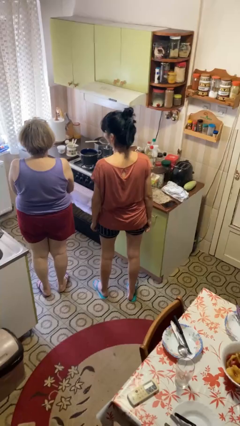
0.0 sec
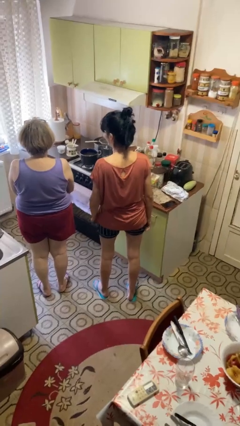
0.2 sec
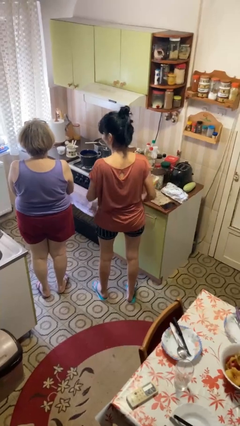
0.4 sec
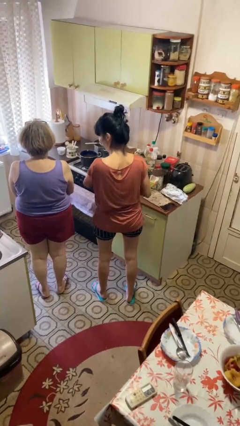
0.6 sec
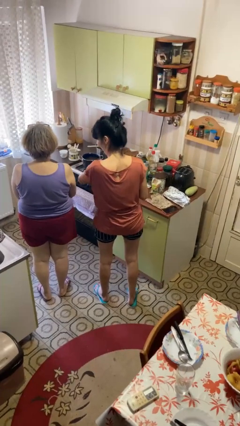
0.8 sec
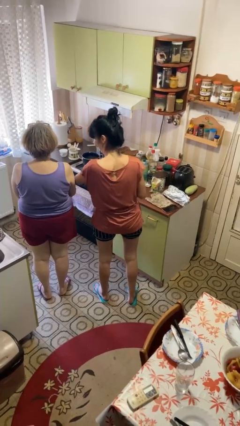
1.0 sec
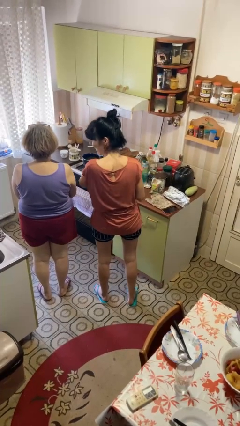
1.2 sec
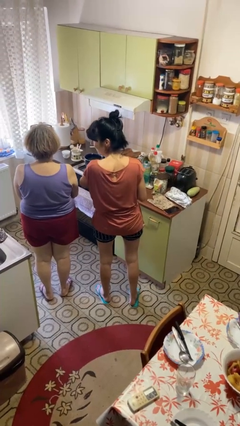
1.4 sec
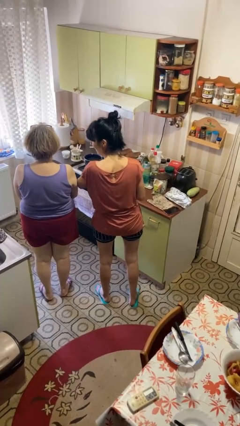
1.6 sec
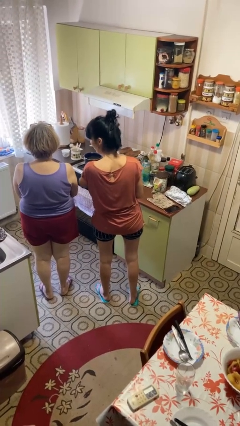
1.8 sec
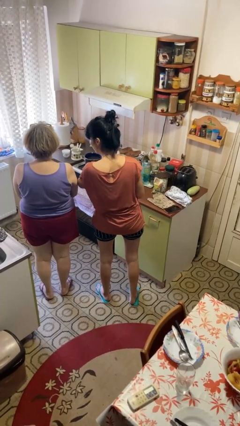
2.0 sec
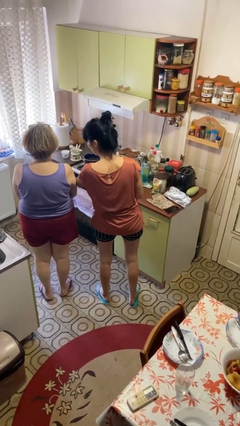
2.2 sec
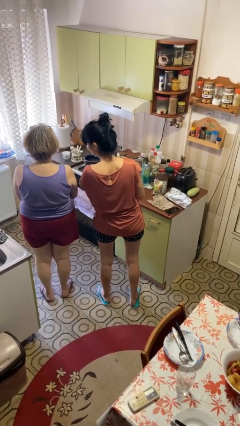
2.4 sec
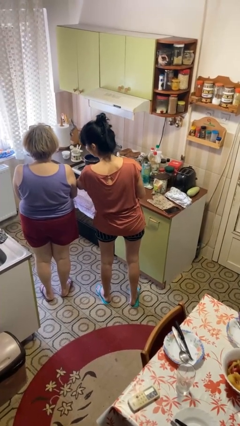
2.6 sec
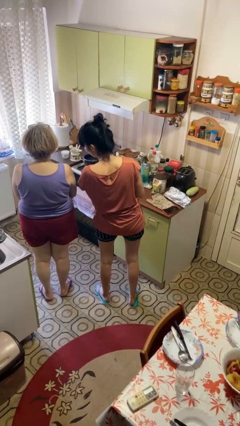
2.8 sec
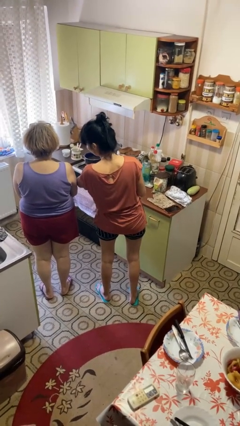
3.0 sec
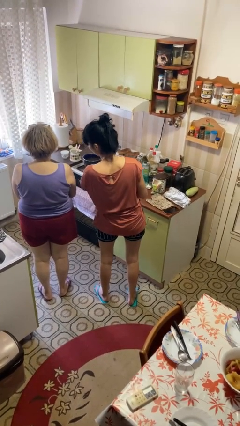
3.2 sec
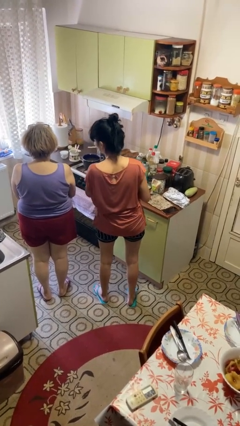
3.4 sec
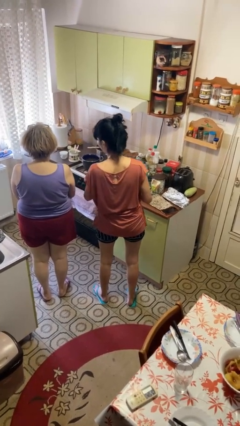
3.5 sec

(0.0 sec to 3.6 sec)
person nudges person with elbow

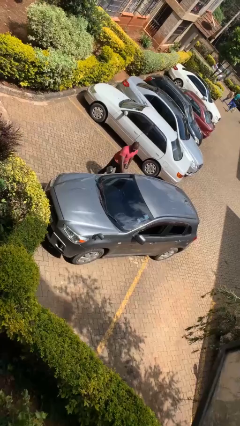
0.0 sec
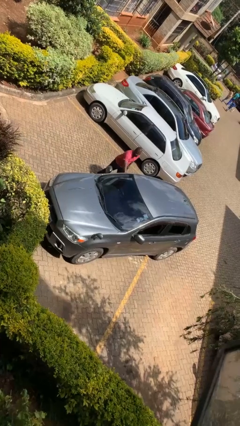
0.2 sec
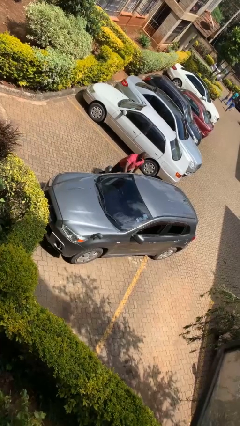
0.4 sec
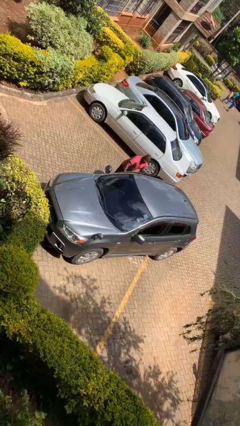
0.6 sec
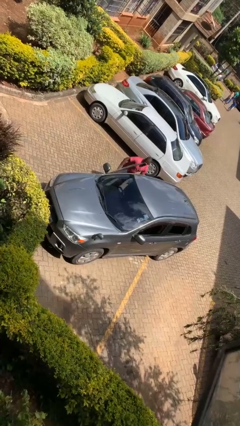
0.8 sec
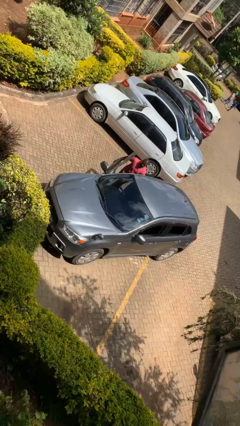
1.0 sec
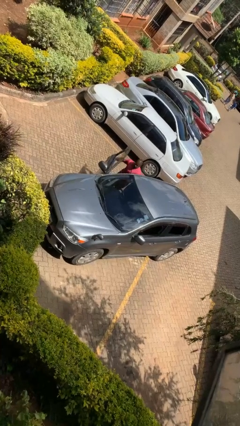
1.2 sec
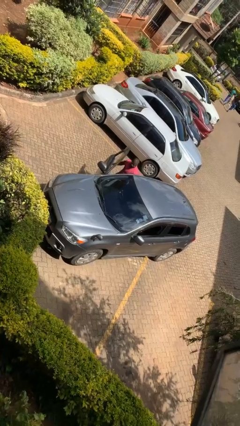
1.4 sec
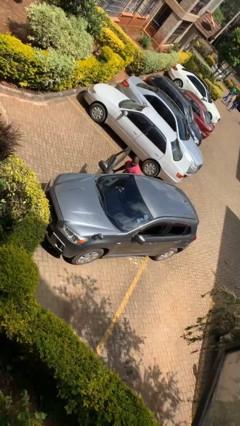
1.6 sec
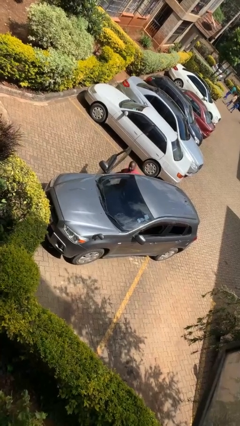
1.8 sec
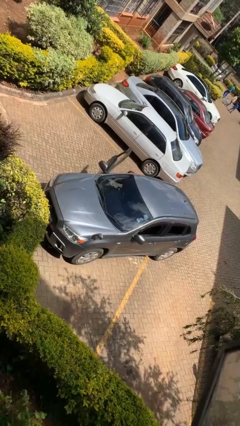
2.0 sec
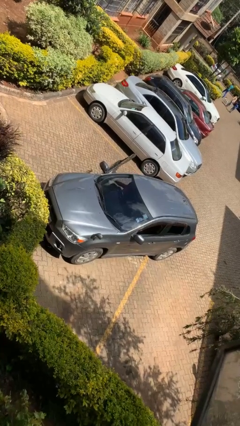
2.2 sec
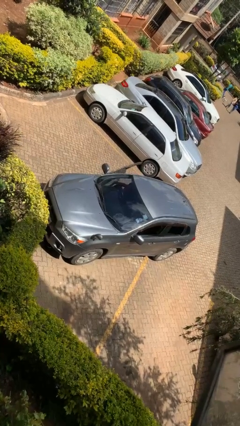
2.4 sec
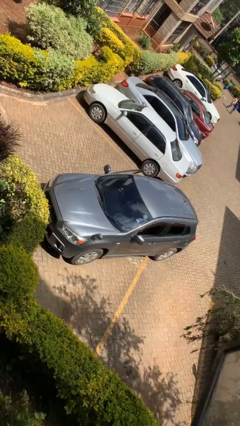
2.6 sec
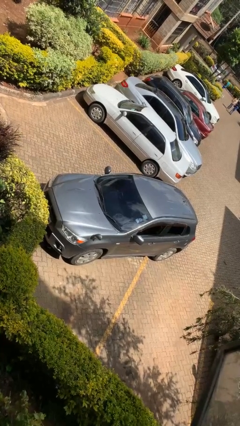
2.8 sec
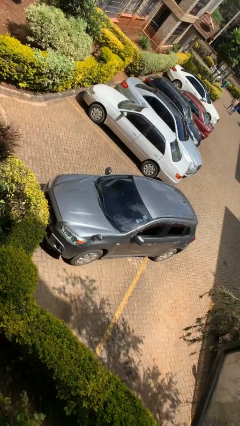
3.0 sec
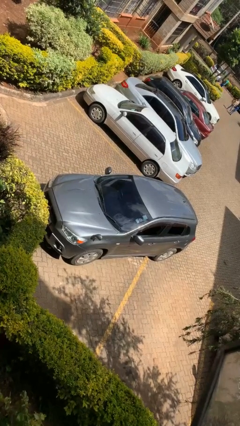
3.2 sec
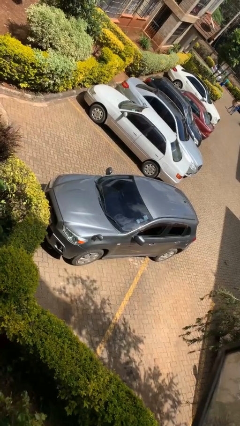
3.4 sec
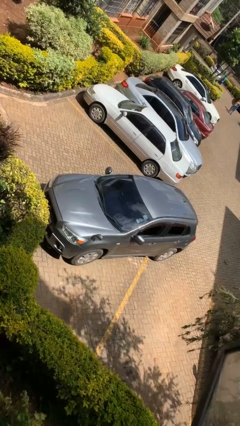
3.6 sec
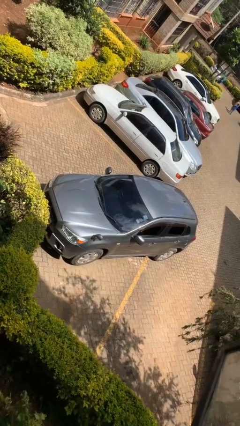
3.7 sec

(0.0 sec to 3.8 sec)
car picks up person

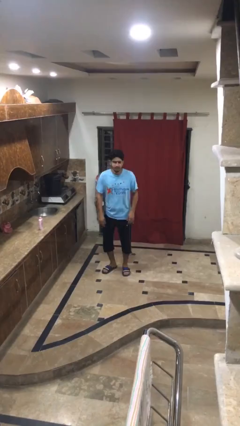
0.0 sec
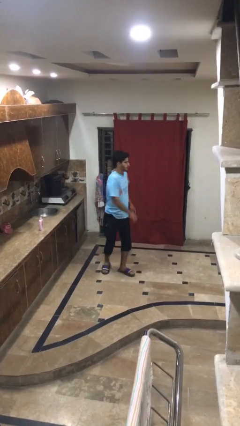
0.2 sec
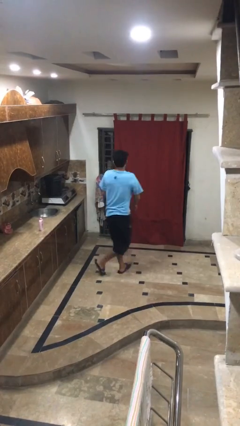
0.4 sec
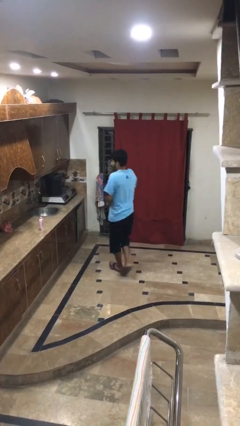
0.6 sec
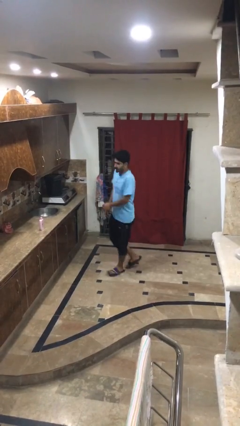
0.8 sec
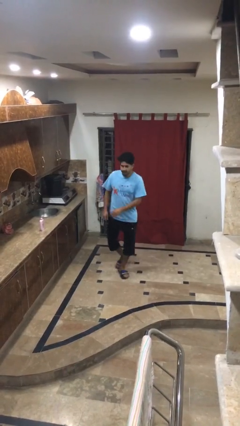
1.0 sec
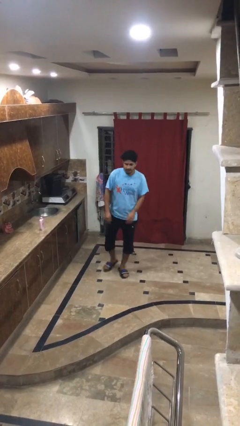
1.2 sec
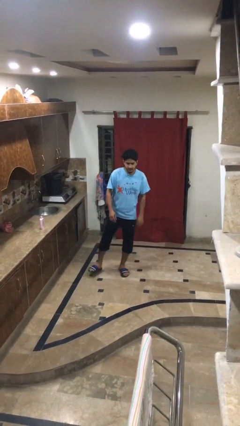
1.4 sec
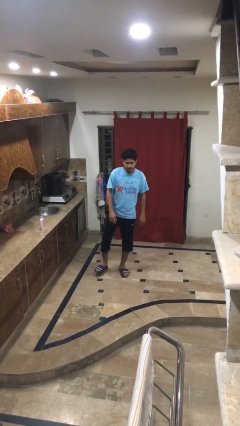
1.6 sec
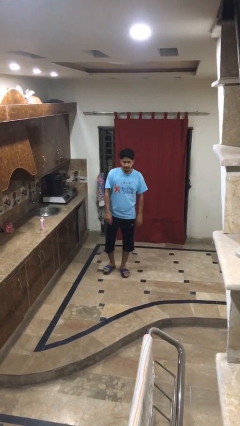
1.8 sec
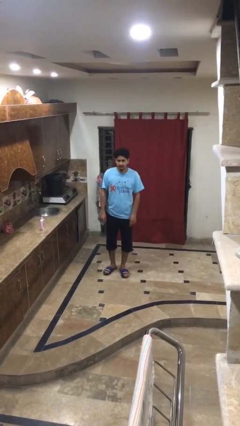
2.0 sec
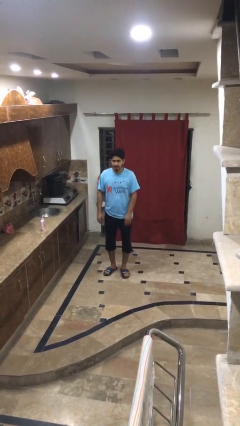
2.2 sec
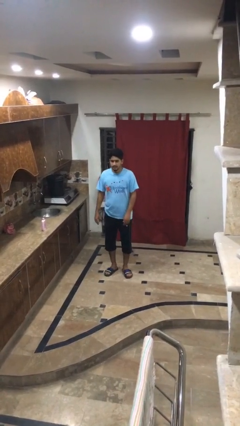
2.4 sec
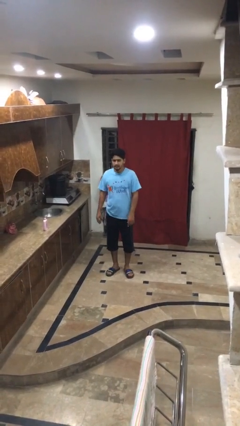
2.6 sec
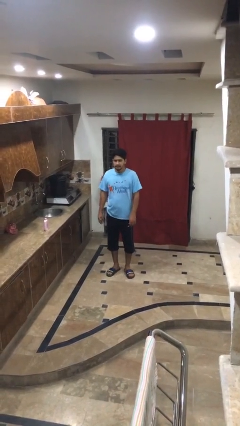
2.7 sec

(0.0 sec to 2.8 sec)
person twirls

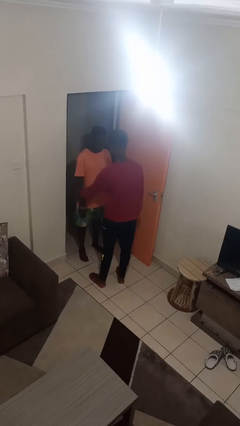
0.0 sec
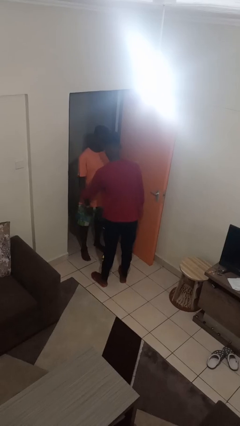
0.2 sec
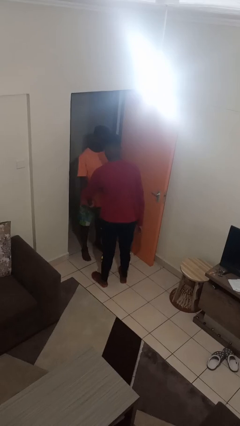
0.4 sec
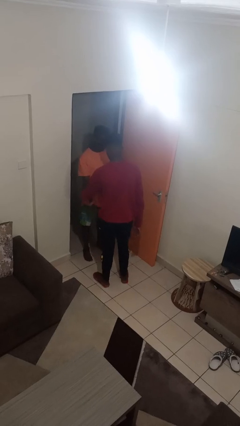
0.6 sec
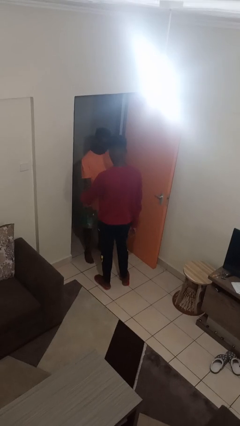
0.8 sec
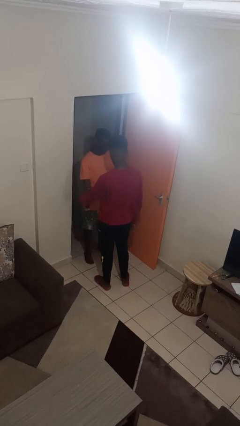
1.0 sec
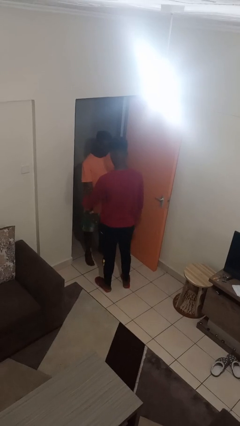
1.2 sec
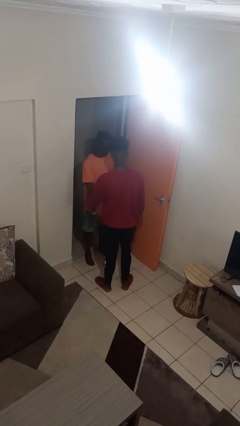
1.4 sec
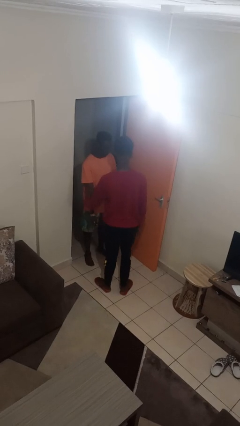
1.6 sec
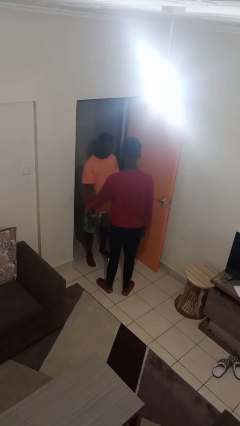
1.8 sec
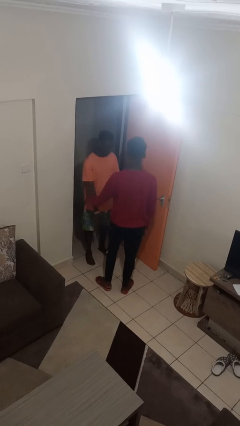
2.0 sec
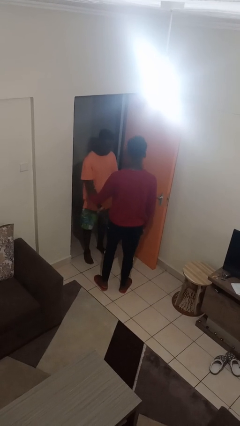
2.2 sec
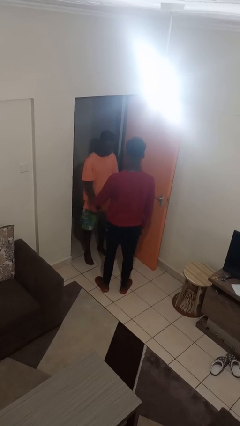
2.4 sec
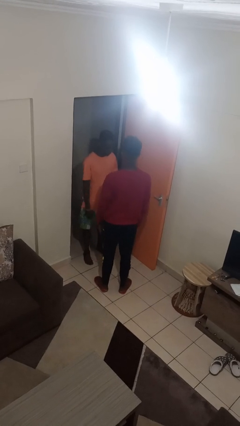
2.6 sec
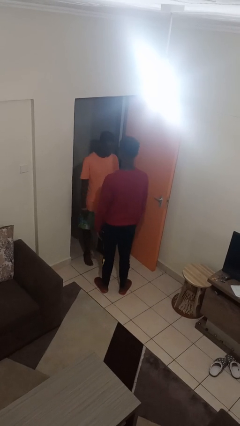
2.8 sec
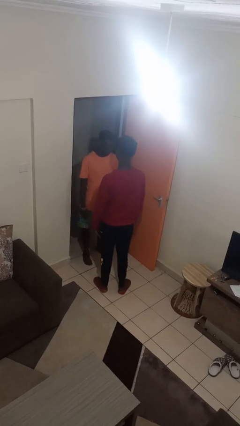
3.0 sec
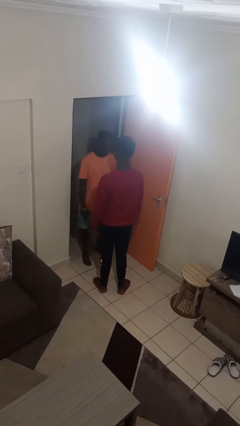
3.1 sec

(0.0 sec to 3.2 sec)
person grabs person by forearm

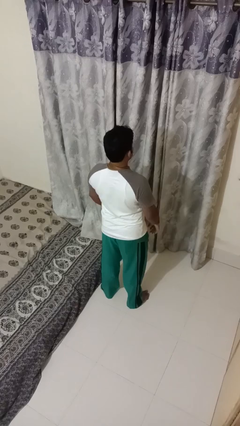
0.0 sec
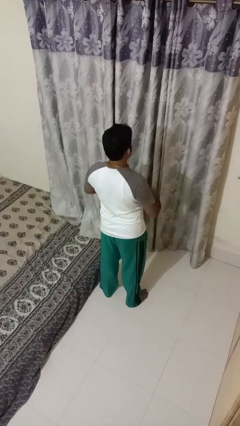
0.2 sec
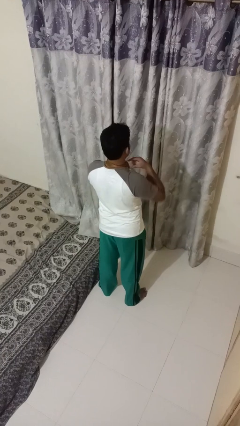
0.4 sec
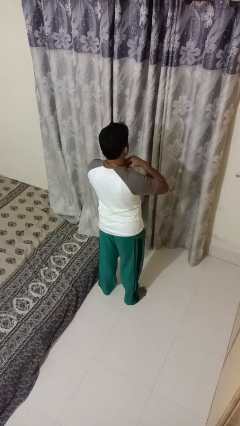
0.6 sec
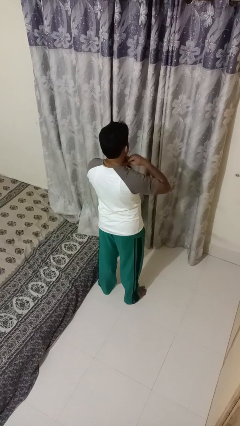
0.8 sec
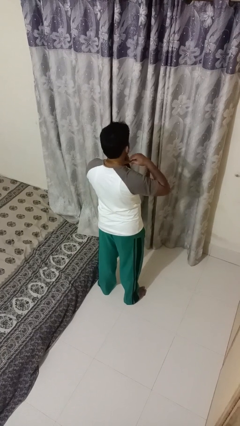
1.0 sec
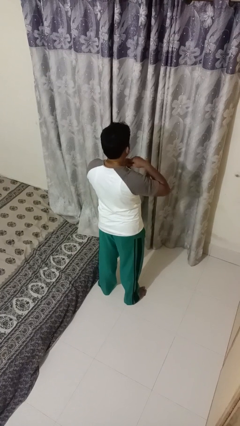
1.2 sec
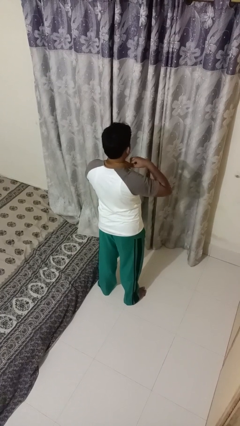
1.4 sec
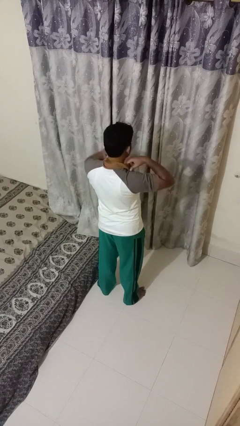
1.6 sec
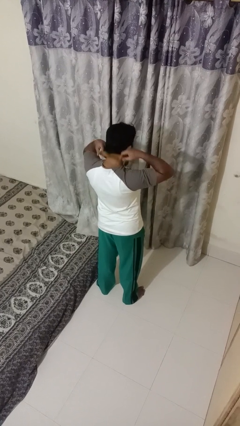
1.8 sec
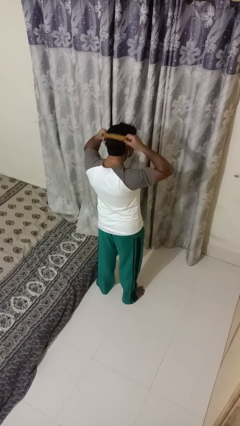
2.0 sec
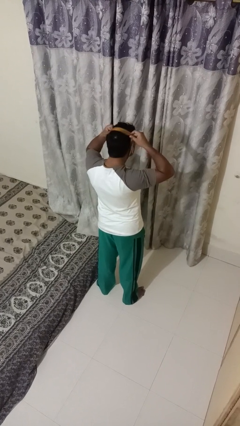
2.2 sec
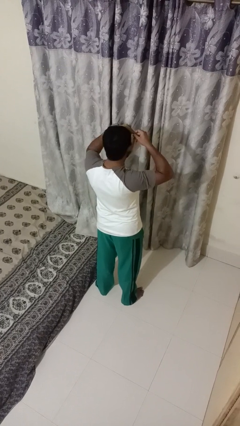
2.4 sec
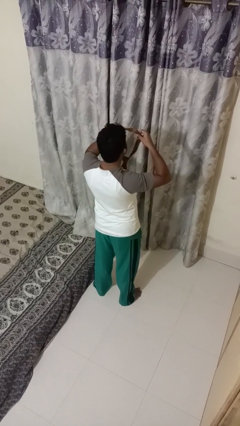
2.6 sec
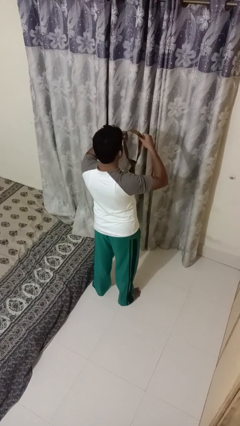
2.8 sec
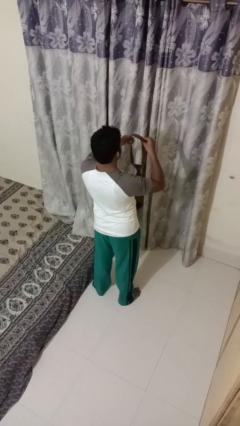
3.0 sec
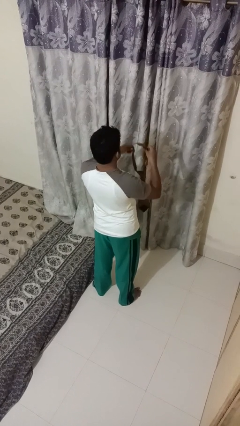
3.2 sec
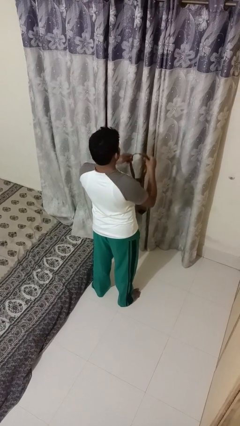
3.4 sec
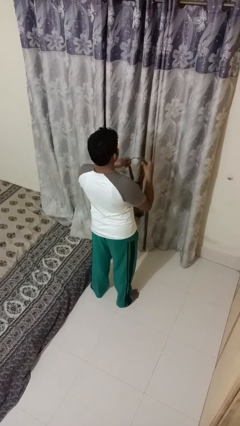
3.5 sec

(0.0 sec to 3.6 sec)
person takes off necktie

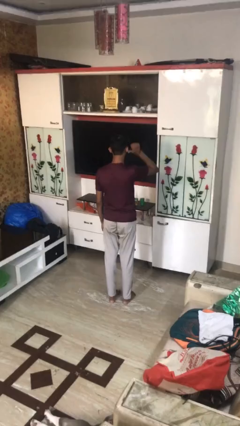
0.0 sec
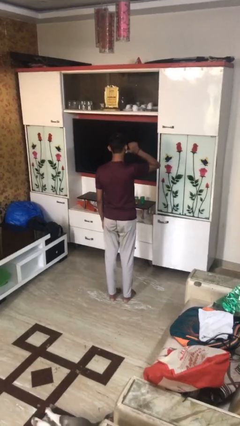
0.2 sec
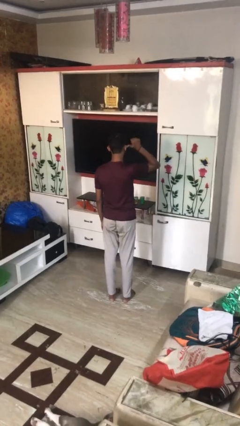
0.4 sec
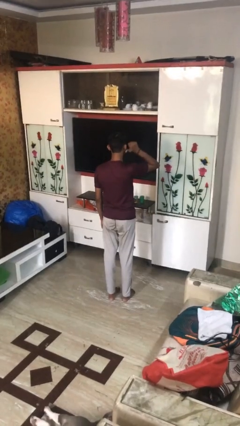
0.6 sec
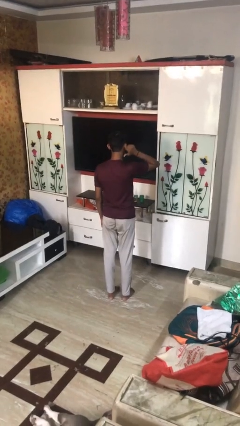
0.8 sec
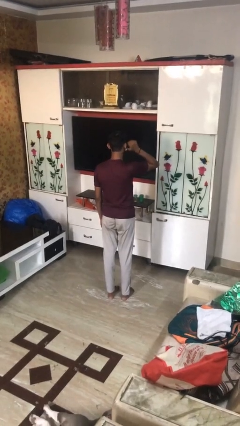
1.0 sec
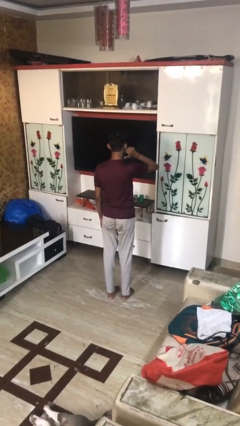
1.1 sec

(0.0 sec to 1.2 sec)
person gestures behind me
